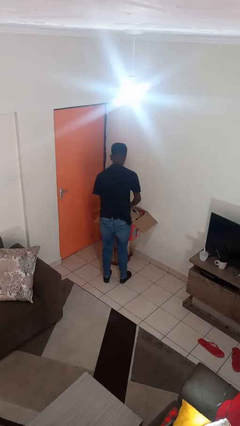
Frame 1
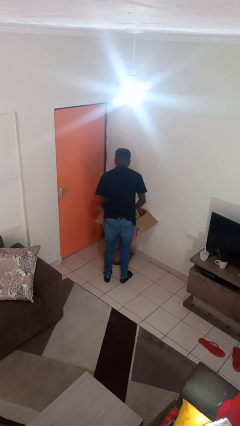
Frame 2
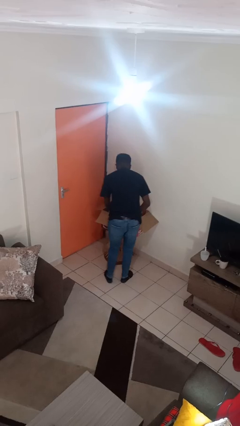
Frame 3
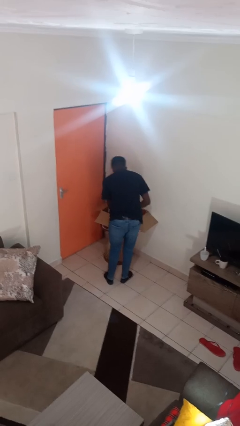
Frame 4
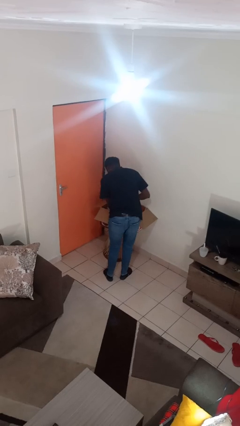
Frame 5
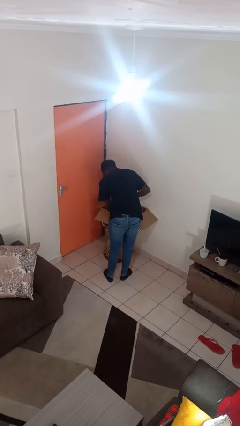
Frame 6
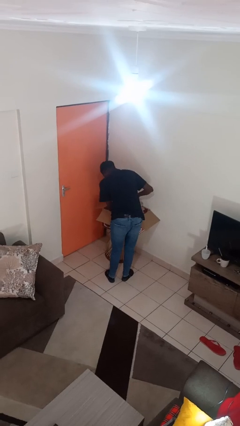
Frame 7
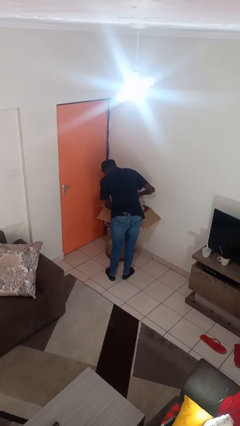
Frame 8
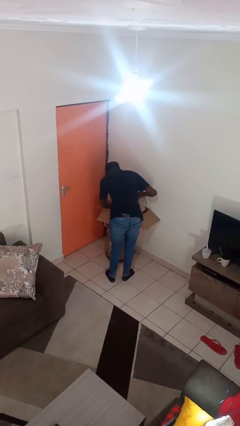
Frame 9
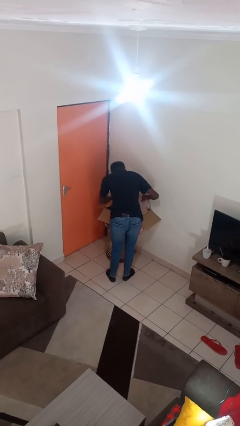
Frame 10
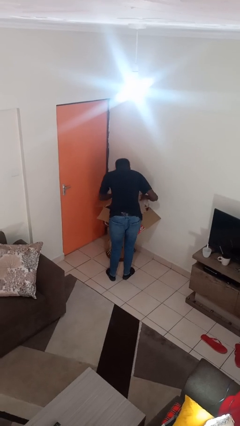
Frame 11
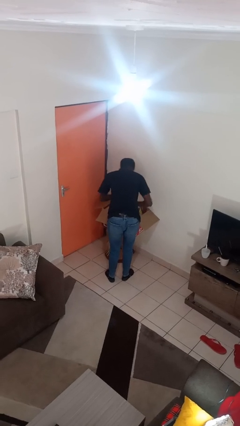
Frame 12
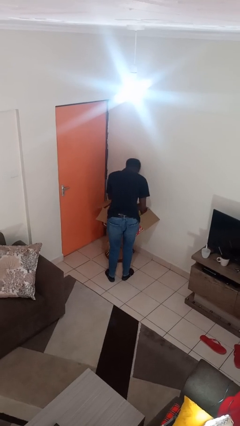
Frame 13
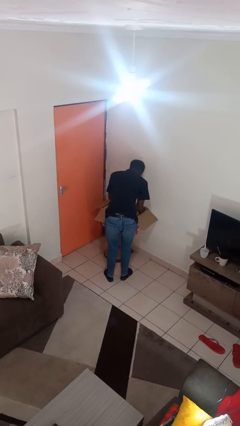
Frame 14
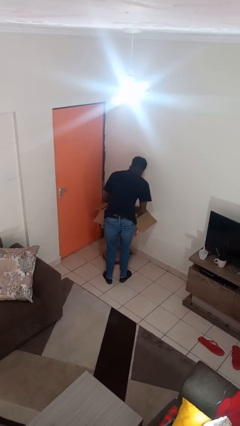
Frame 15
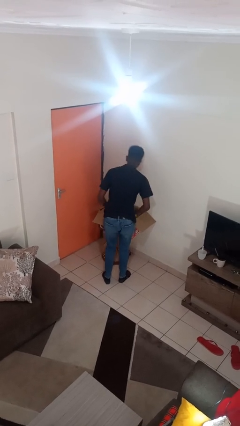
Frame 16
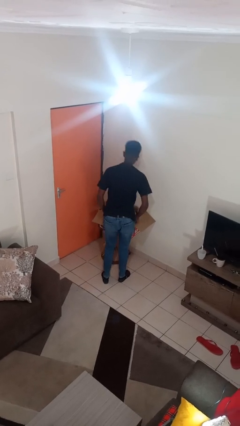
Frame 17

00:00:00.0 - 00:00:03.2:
person searches in box

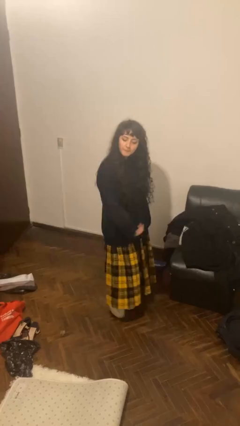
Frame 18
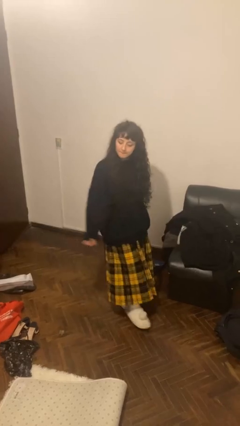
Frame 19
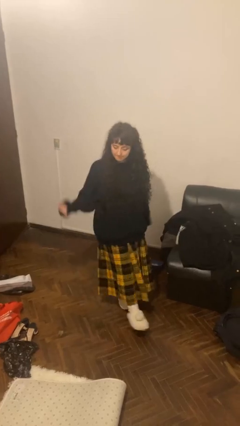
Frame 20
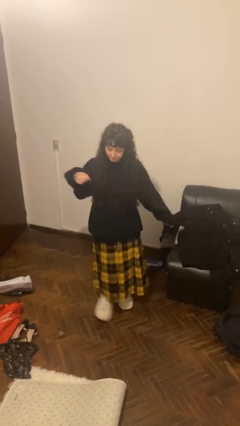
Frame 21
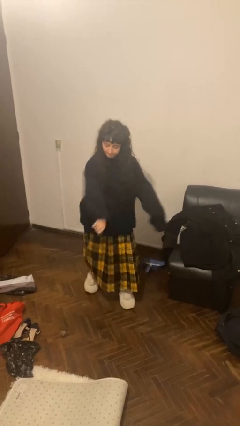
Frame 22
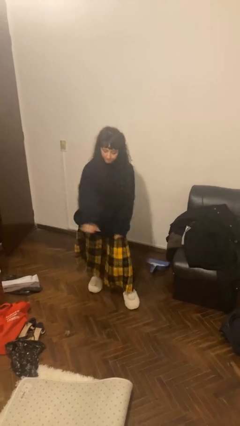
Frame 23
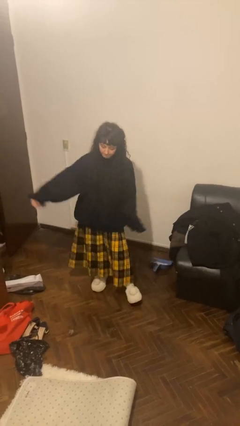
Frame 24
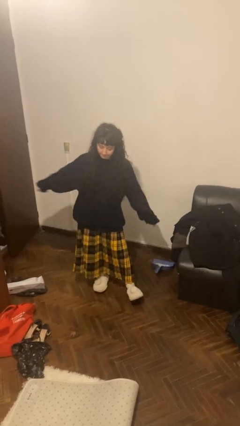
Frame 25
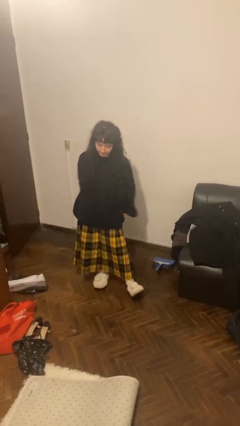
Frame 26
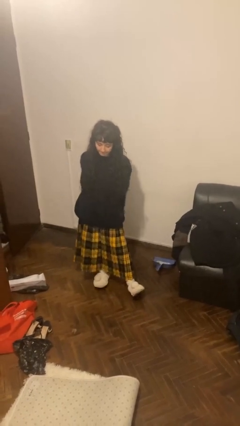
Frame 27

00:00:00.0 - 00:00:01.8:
person punches

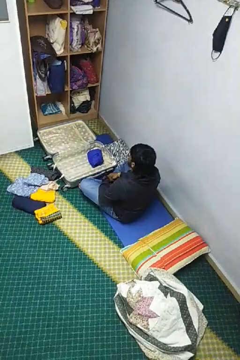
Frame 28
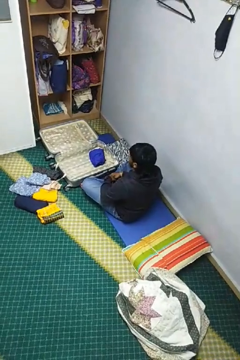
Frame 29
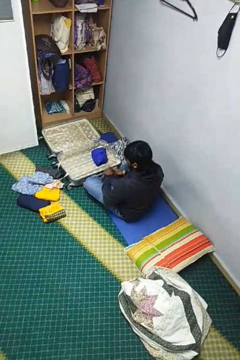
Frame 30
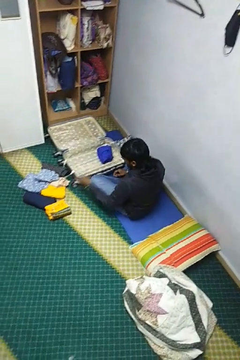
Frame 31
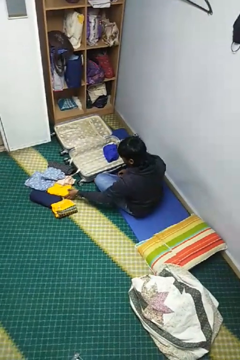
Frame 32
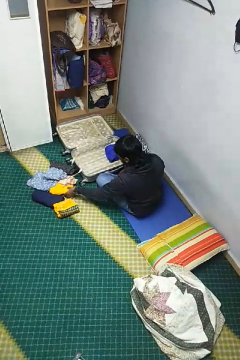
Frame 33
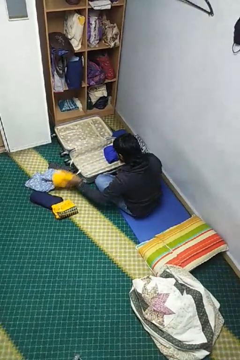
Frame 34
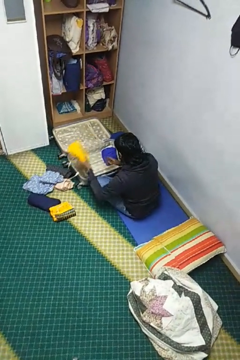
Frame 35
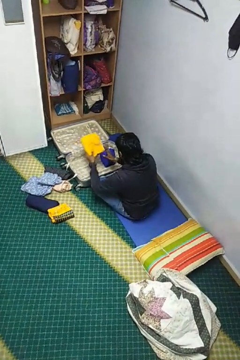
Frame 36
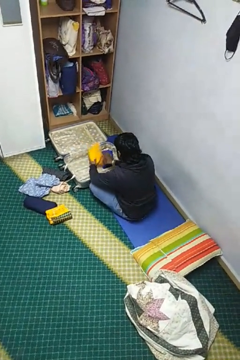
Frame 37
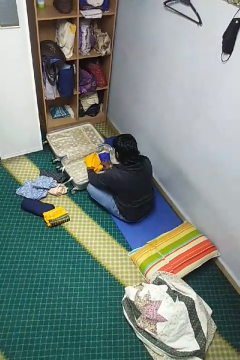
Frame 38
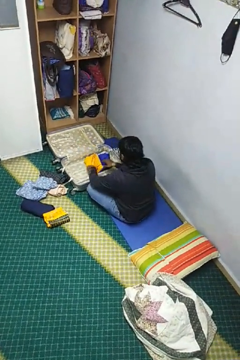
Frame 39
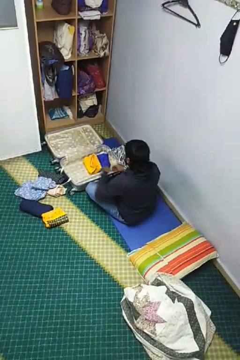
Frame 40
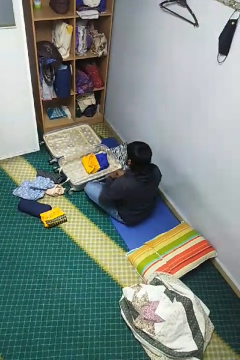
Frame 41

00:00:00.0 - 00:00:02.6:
person loads clothes into suitcase

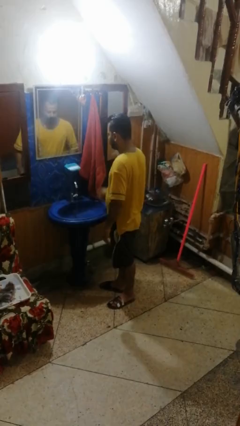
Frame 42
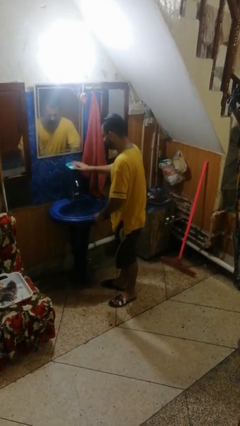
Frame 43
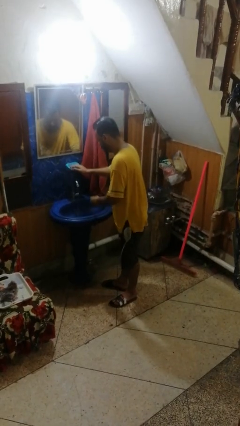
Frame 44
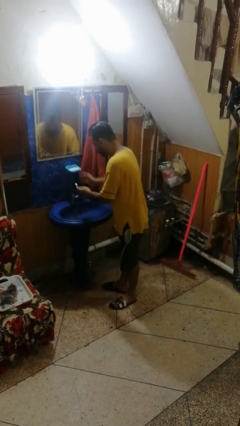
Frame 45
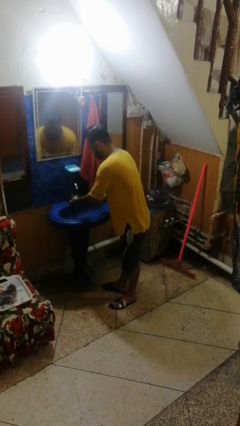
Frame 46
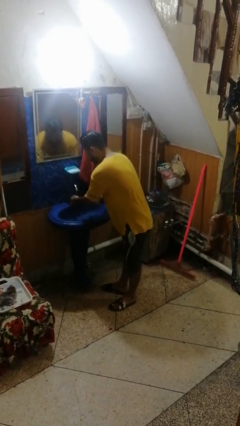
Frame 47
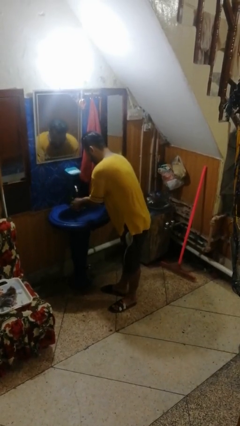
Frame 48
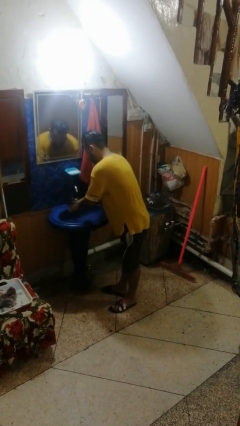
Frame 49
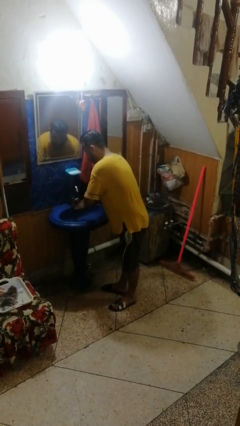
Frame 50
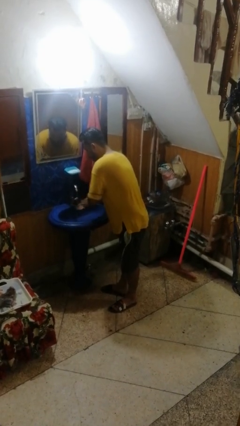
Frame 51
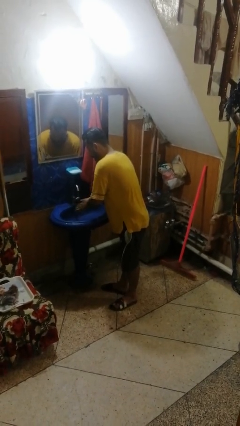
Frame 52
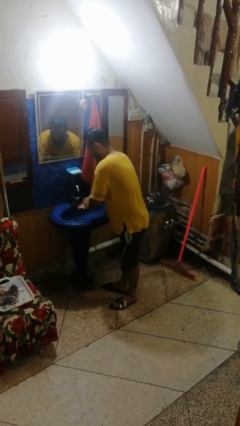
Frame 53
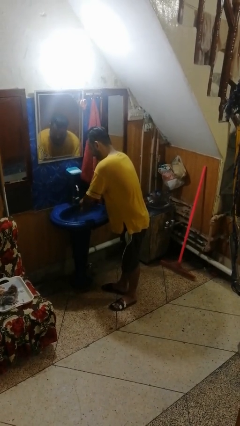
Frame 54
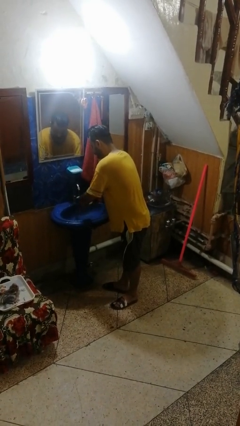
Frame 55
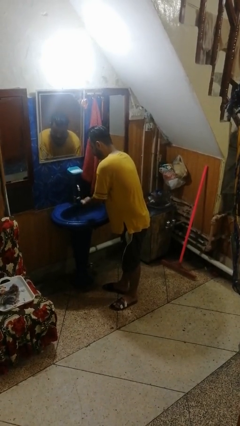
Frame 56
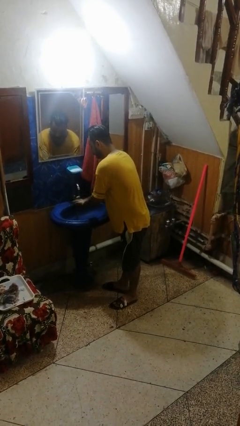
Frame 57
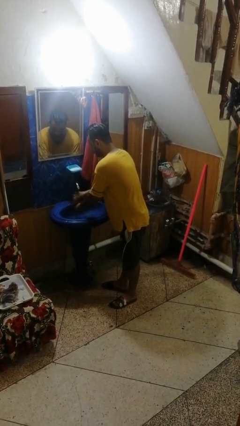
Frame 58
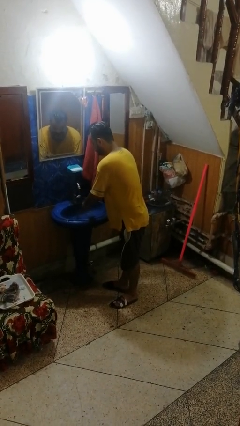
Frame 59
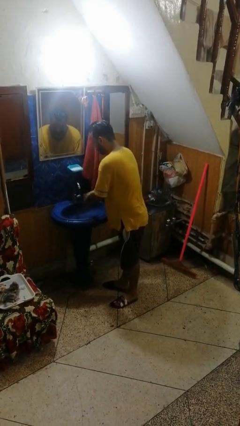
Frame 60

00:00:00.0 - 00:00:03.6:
person washes hands

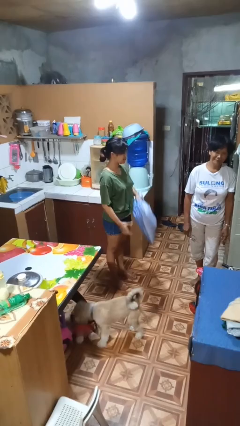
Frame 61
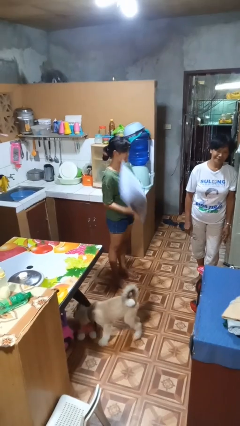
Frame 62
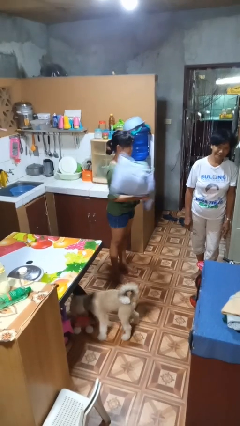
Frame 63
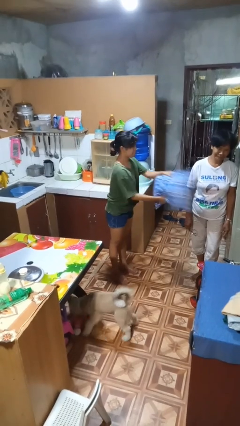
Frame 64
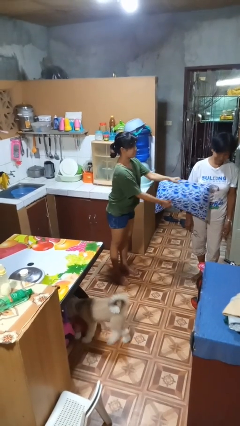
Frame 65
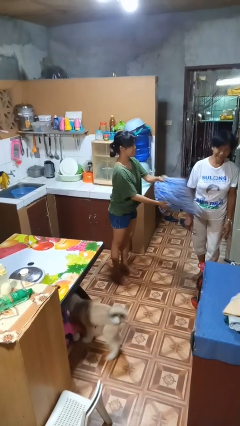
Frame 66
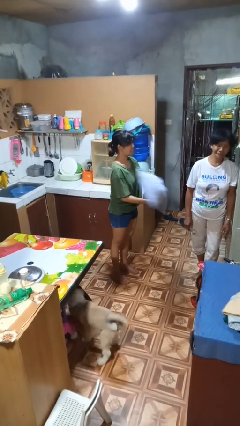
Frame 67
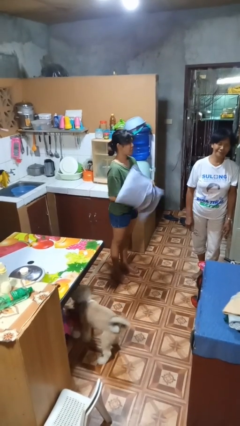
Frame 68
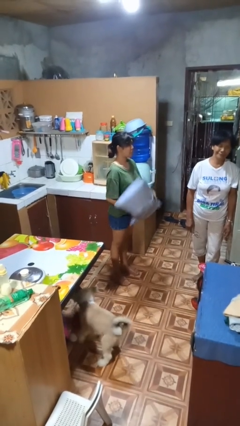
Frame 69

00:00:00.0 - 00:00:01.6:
person hits person with pillow

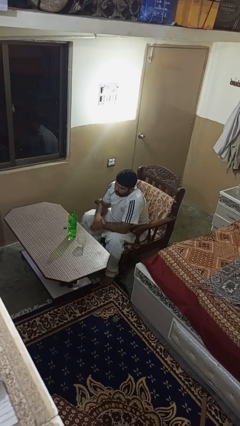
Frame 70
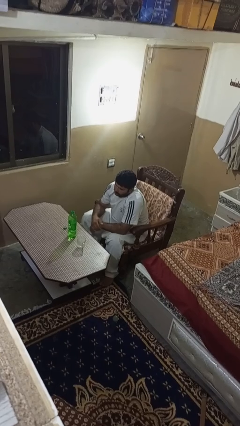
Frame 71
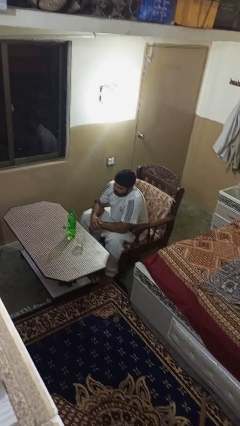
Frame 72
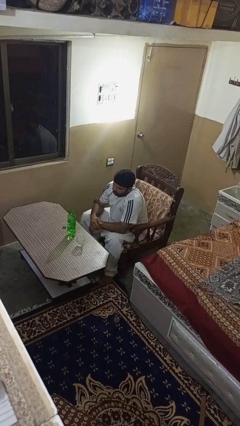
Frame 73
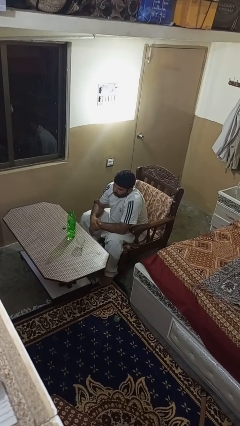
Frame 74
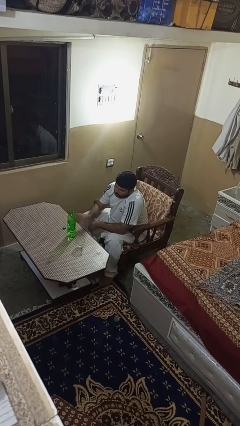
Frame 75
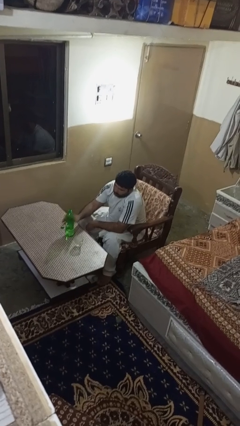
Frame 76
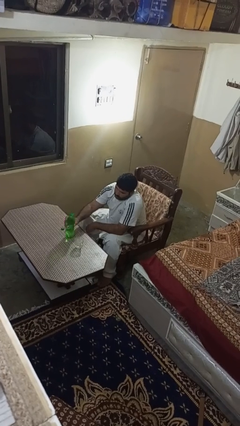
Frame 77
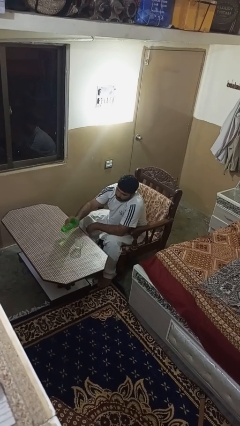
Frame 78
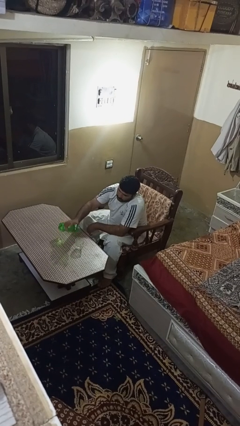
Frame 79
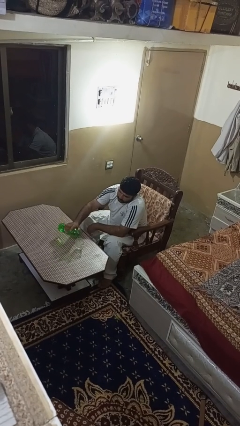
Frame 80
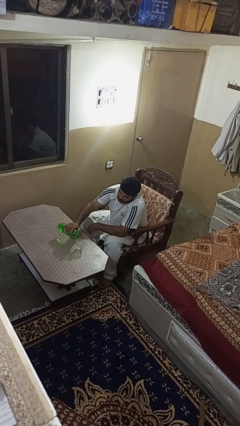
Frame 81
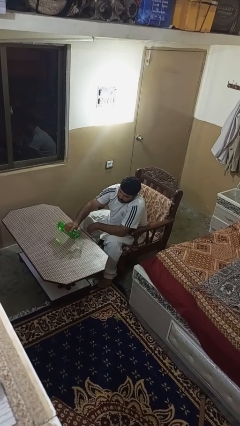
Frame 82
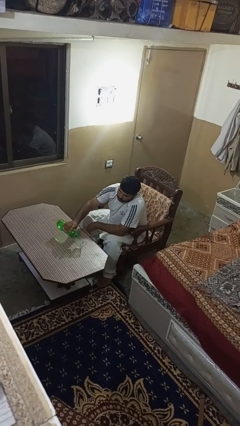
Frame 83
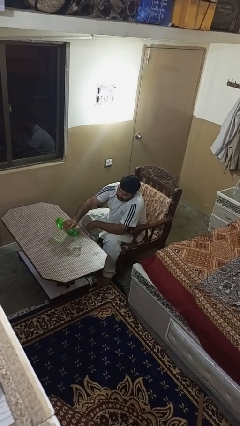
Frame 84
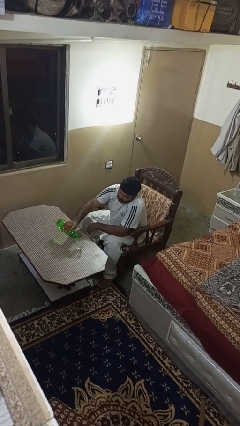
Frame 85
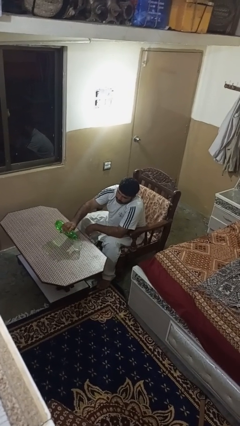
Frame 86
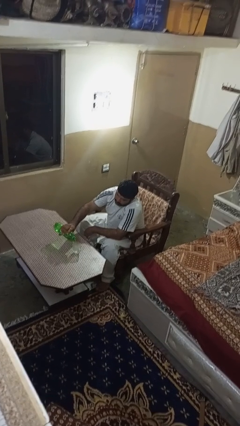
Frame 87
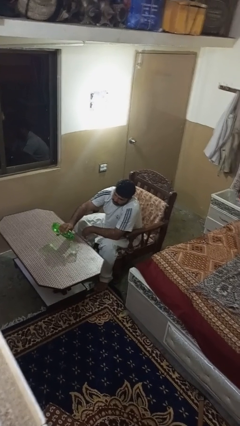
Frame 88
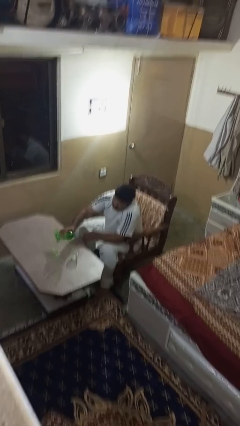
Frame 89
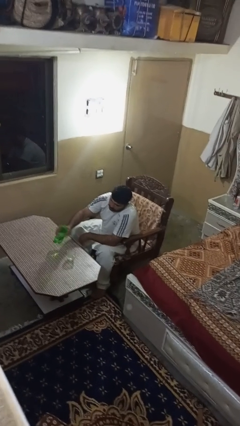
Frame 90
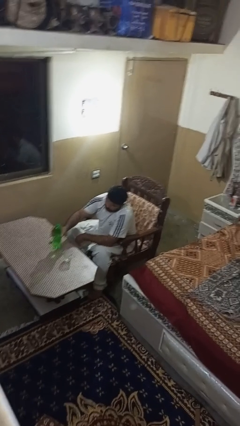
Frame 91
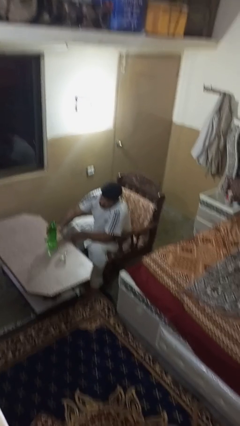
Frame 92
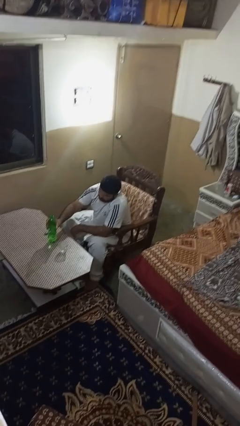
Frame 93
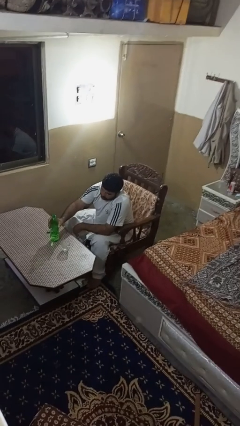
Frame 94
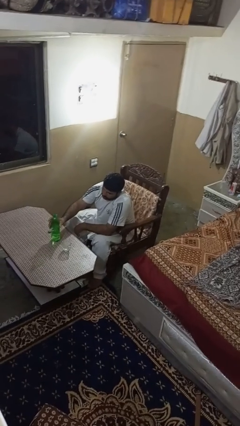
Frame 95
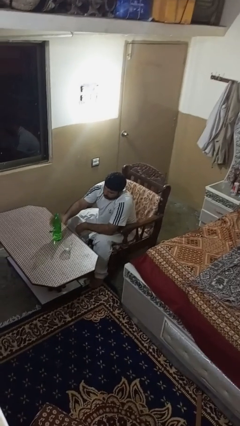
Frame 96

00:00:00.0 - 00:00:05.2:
person pours liquid into cup
